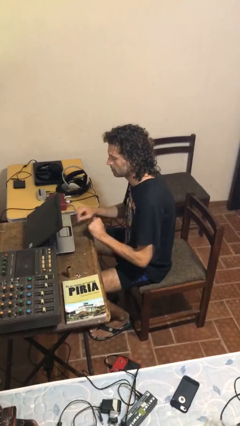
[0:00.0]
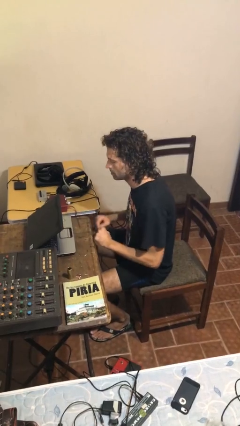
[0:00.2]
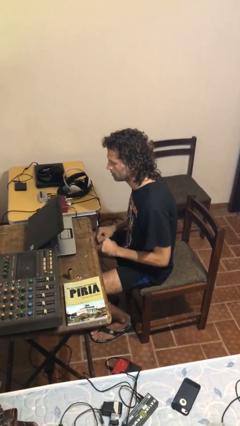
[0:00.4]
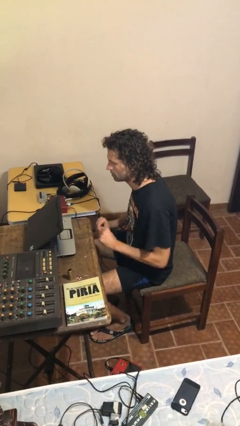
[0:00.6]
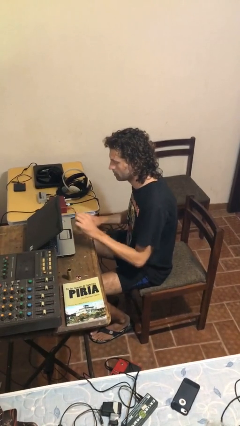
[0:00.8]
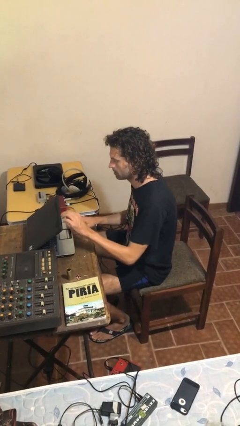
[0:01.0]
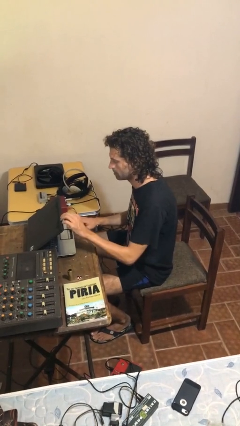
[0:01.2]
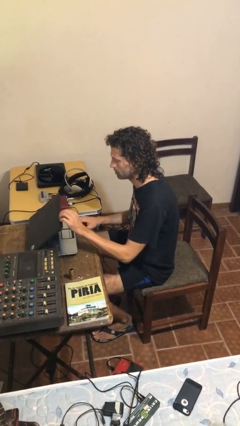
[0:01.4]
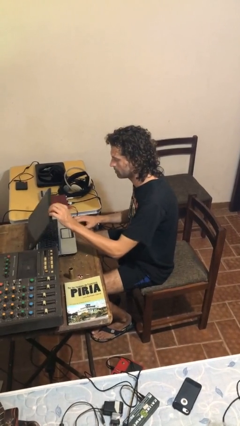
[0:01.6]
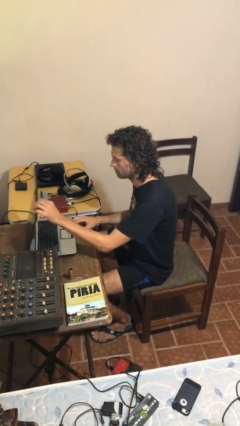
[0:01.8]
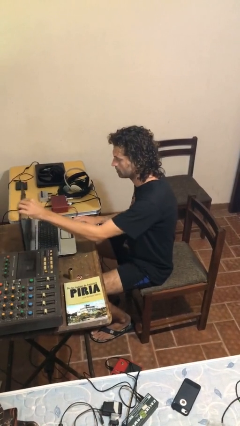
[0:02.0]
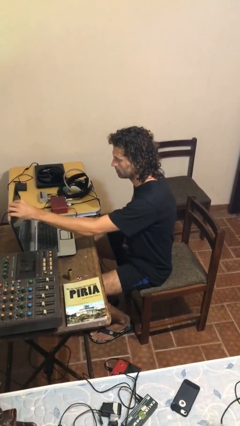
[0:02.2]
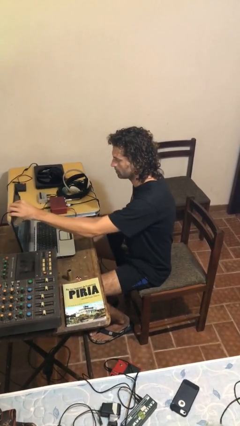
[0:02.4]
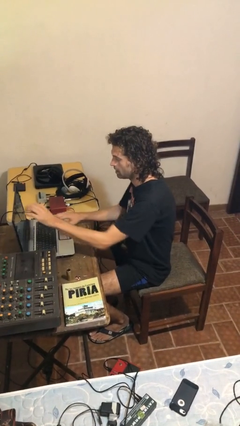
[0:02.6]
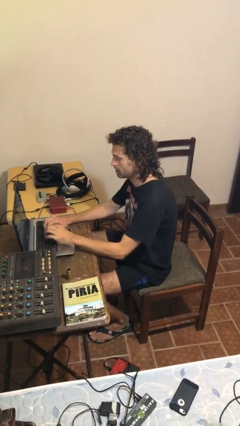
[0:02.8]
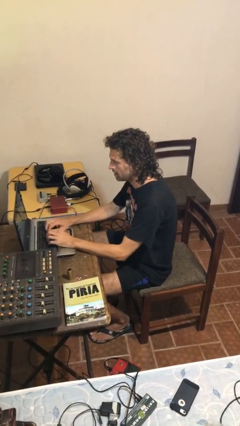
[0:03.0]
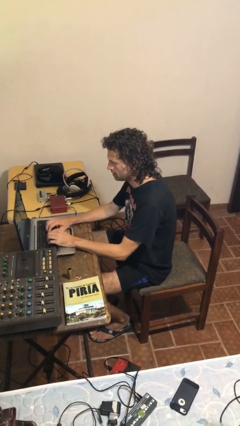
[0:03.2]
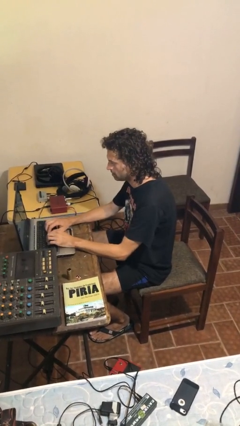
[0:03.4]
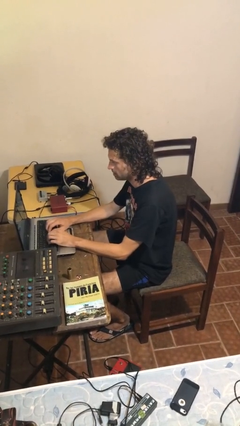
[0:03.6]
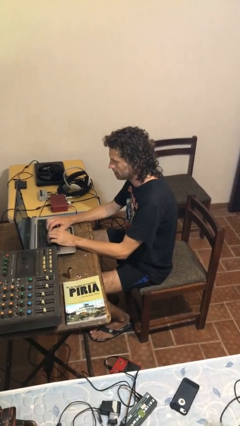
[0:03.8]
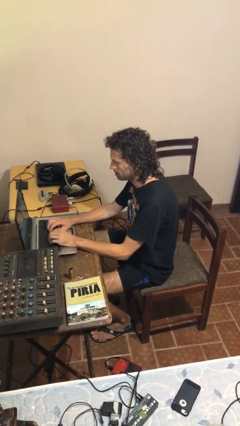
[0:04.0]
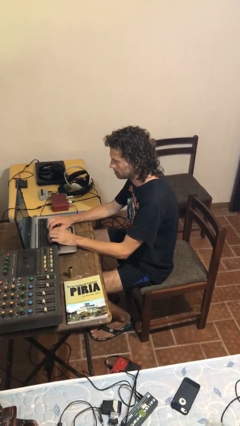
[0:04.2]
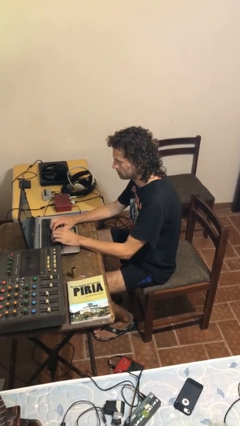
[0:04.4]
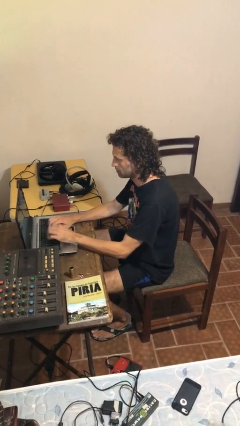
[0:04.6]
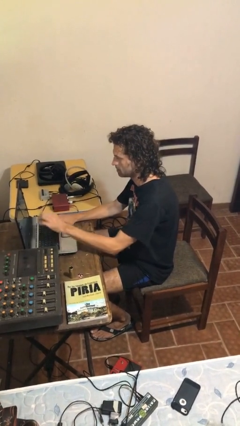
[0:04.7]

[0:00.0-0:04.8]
person interacts with laptop

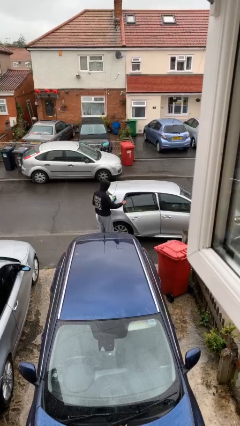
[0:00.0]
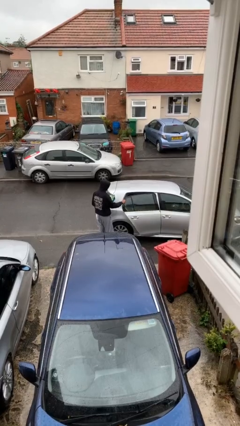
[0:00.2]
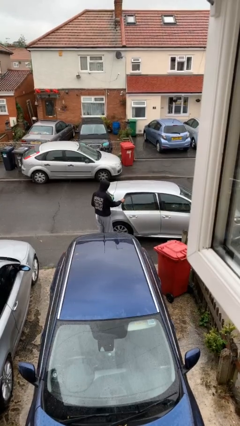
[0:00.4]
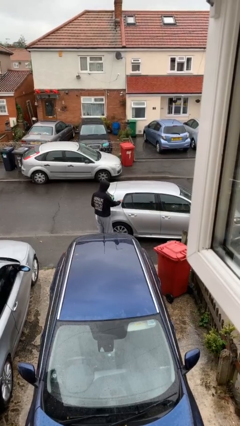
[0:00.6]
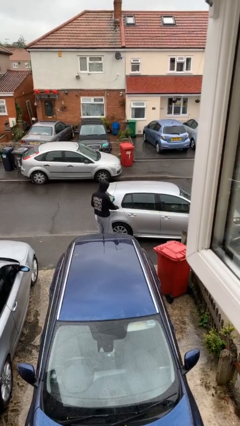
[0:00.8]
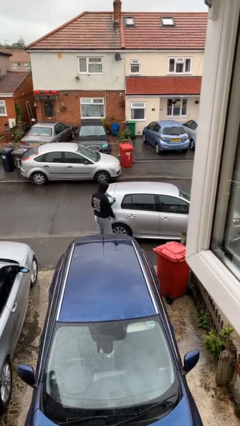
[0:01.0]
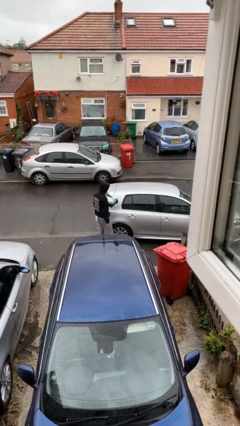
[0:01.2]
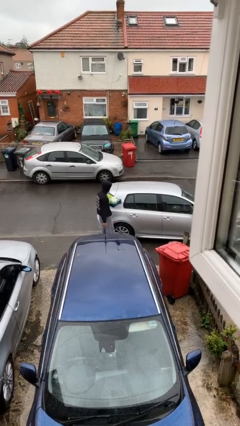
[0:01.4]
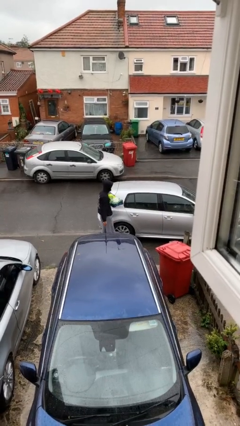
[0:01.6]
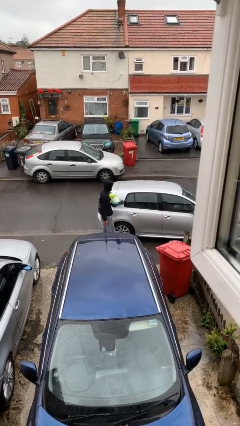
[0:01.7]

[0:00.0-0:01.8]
person closes car door

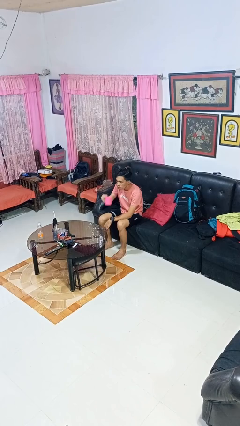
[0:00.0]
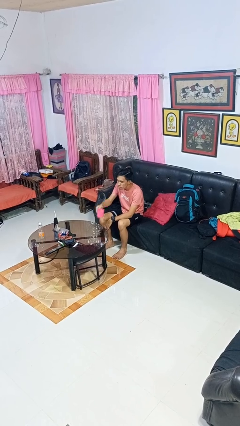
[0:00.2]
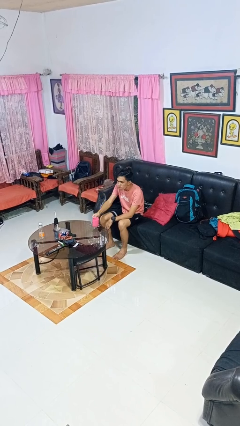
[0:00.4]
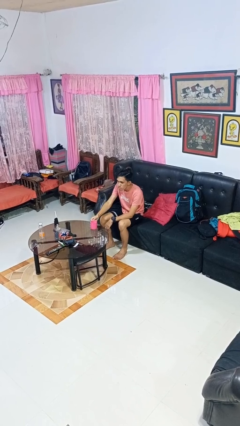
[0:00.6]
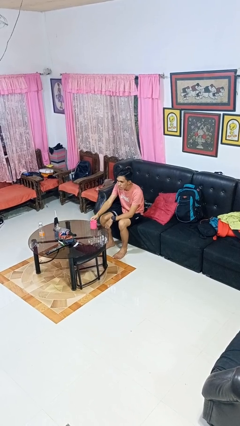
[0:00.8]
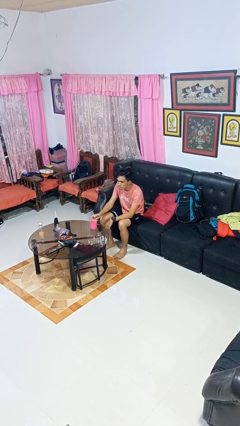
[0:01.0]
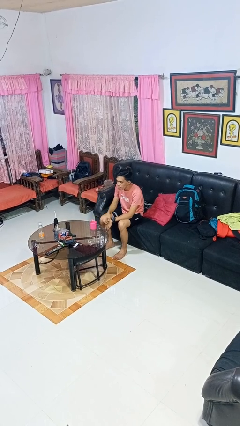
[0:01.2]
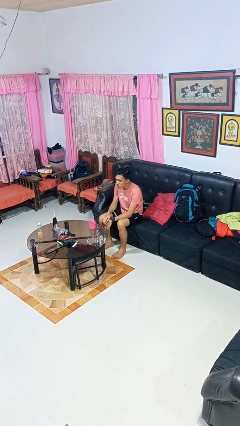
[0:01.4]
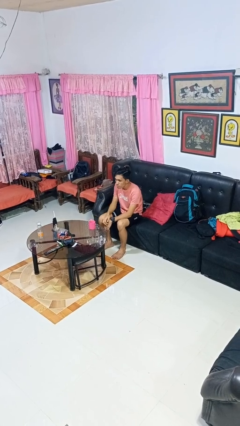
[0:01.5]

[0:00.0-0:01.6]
person puts down object on table

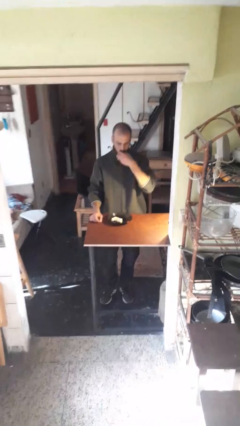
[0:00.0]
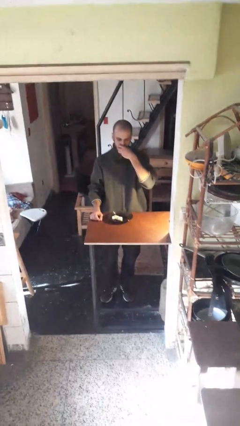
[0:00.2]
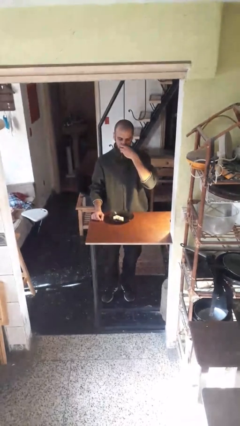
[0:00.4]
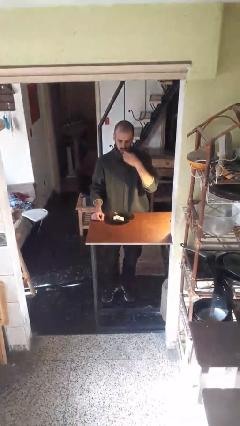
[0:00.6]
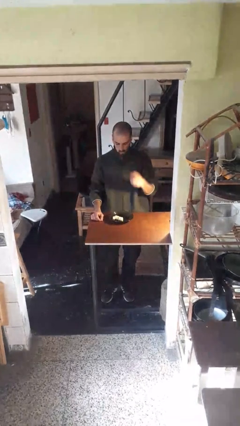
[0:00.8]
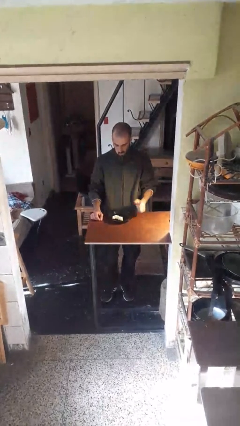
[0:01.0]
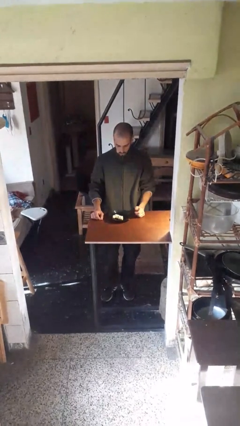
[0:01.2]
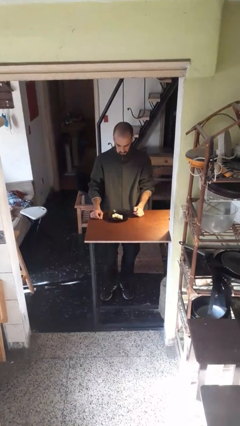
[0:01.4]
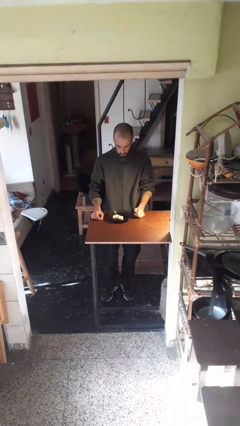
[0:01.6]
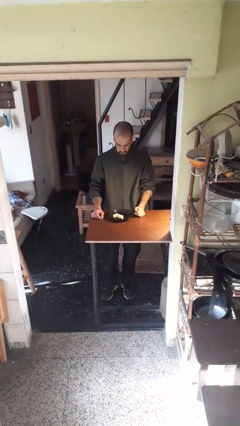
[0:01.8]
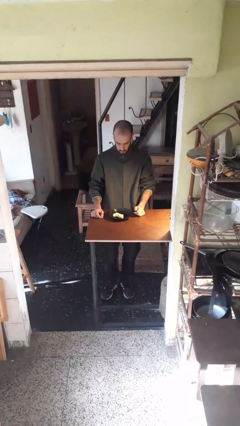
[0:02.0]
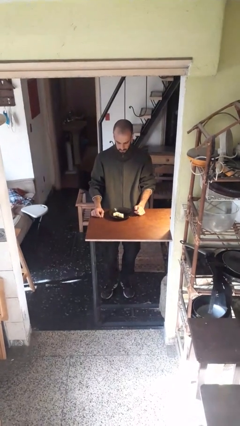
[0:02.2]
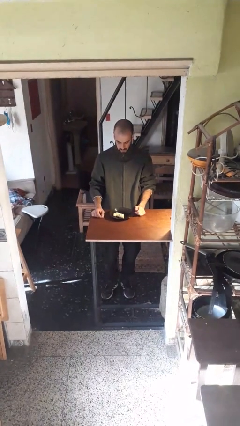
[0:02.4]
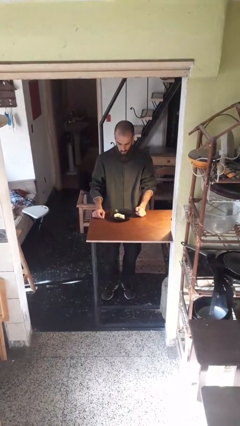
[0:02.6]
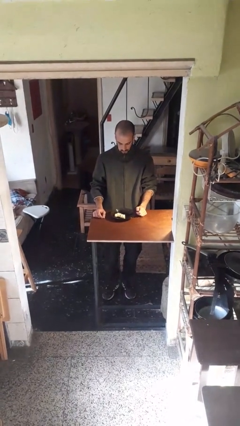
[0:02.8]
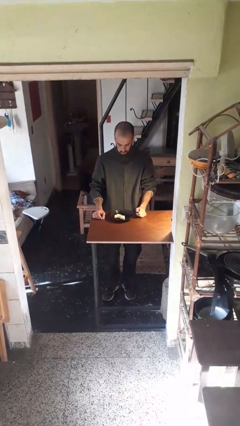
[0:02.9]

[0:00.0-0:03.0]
person eats with hands

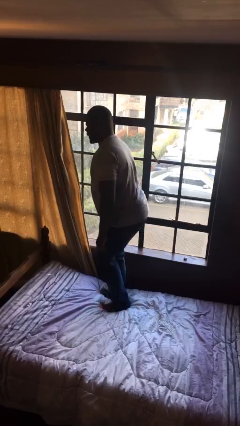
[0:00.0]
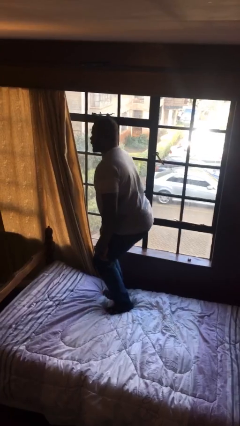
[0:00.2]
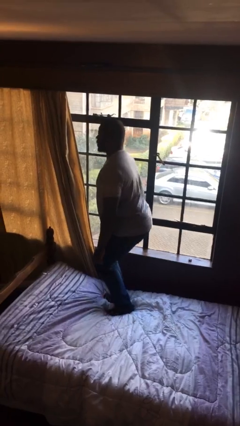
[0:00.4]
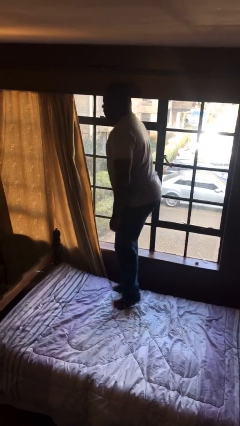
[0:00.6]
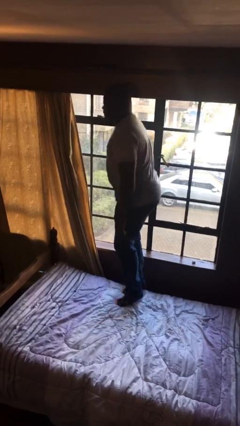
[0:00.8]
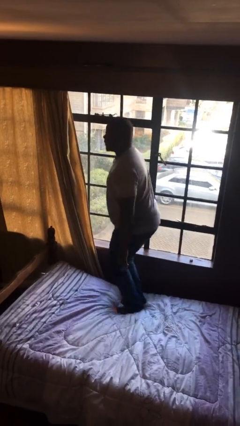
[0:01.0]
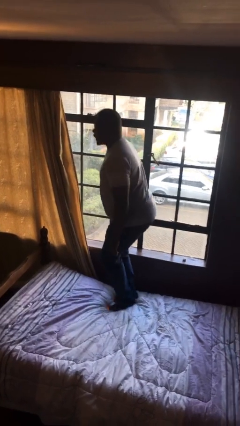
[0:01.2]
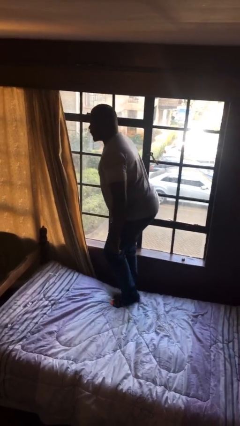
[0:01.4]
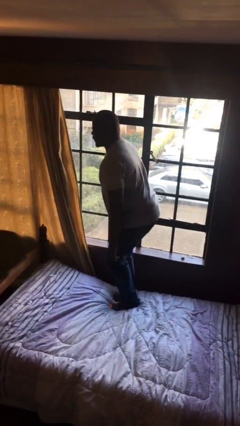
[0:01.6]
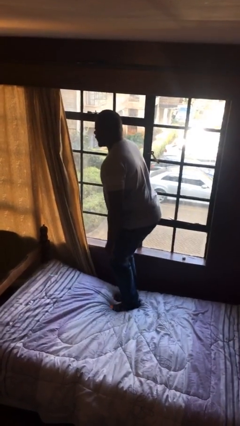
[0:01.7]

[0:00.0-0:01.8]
person jumps on bed

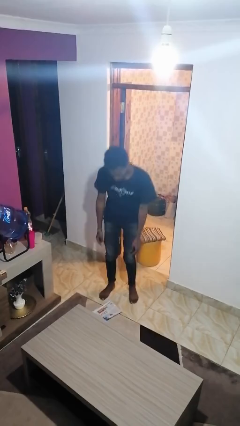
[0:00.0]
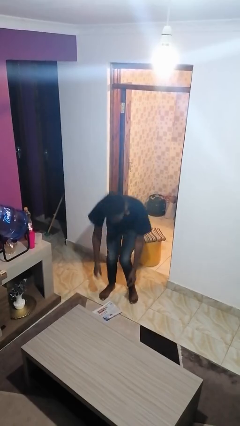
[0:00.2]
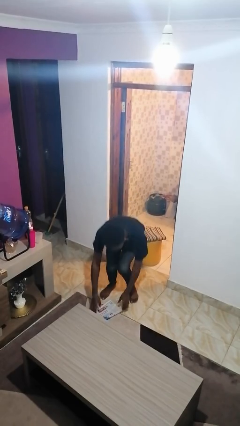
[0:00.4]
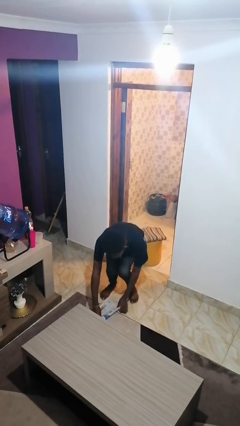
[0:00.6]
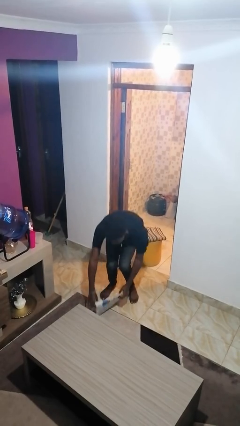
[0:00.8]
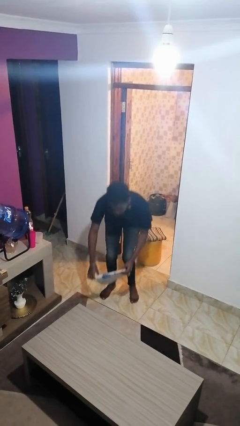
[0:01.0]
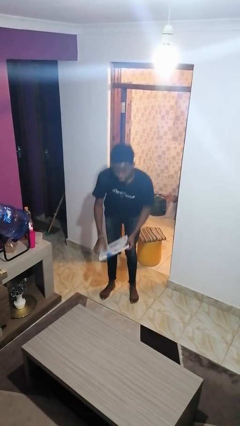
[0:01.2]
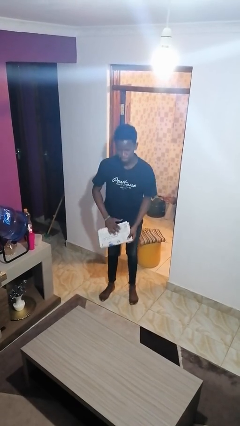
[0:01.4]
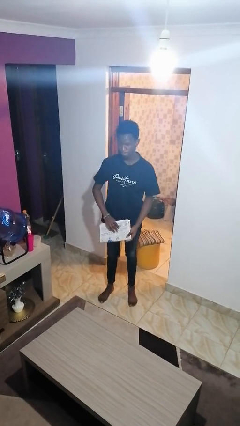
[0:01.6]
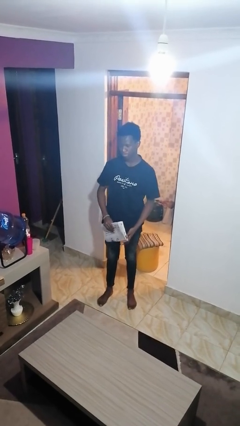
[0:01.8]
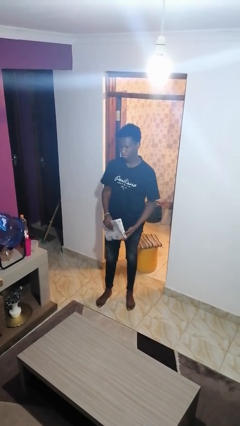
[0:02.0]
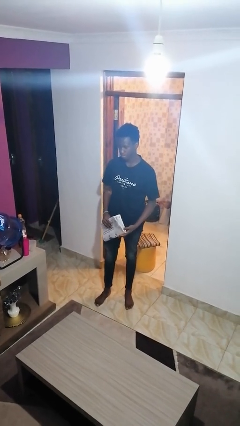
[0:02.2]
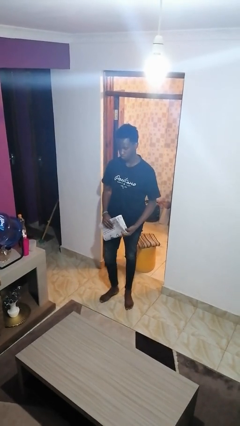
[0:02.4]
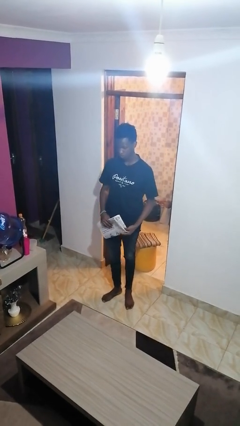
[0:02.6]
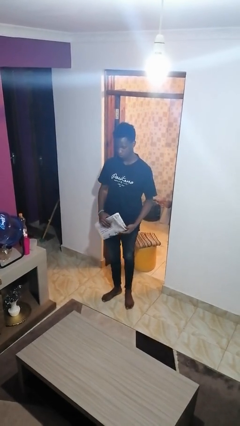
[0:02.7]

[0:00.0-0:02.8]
person picks up object from floor

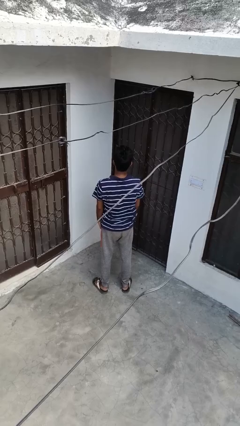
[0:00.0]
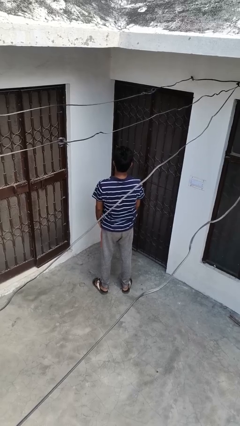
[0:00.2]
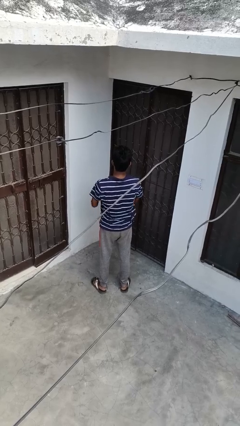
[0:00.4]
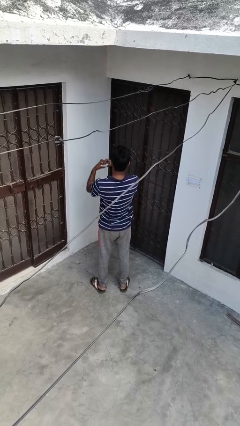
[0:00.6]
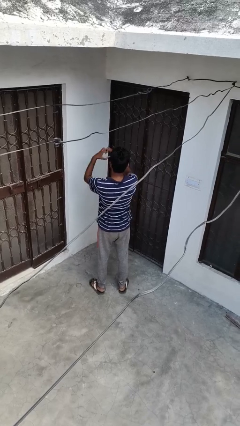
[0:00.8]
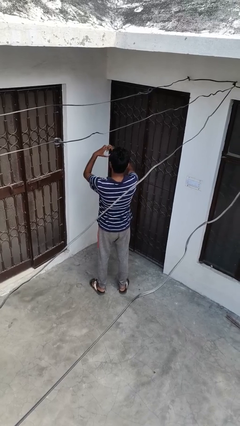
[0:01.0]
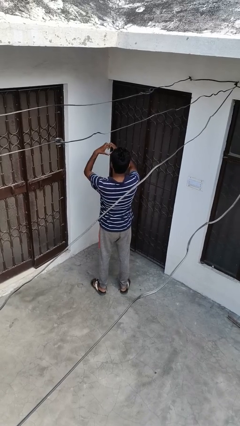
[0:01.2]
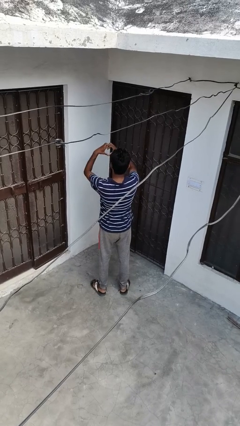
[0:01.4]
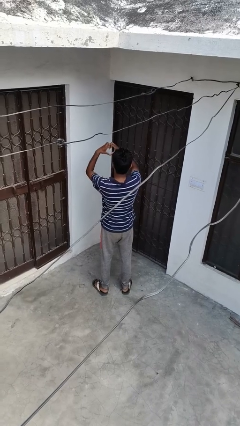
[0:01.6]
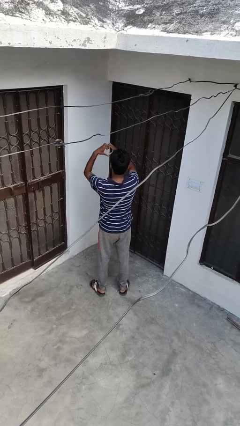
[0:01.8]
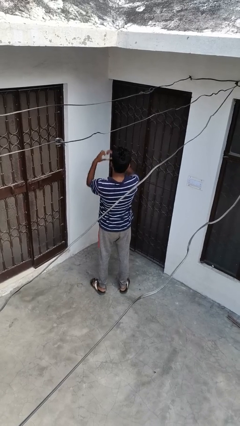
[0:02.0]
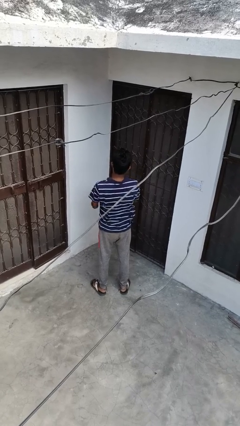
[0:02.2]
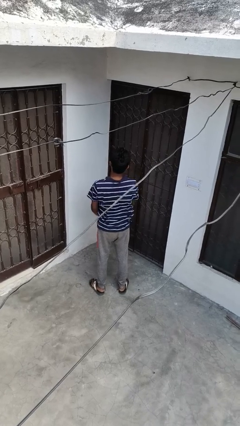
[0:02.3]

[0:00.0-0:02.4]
person gestures heart
